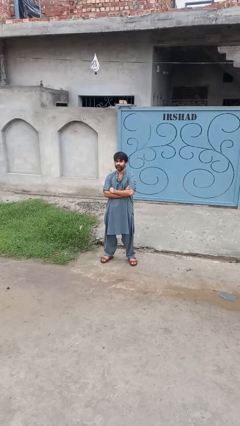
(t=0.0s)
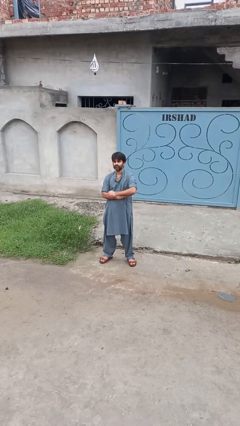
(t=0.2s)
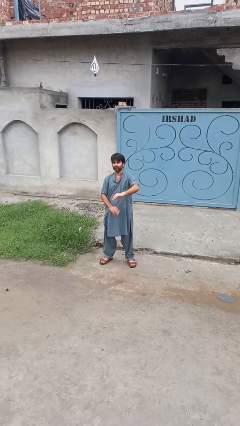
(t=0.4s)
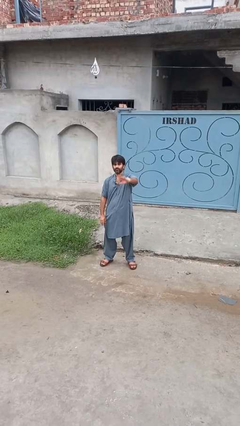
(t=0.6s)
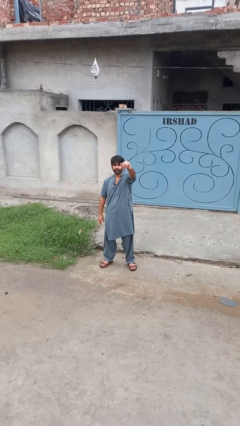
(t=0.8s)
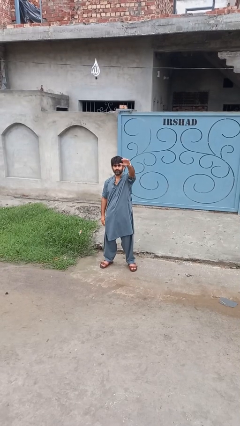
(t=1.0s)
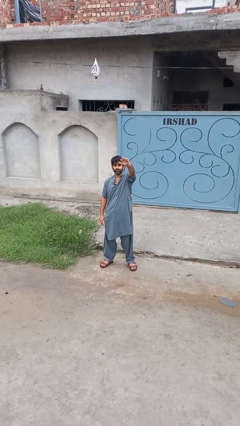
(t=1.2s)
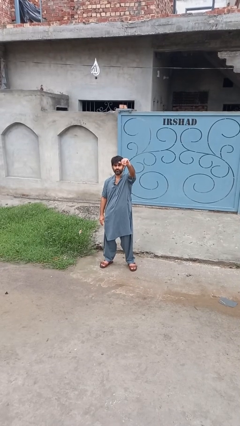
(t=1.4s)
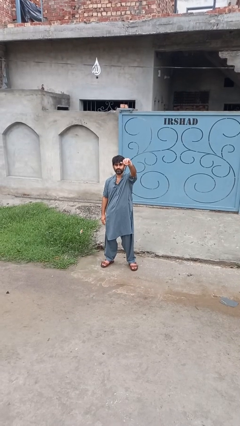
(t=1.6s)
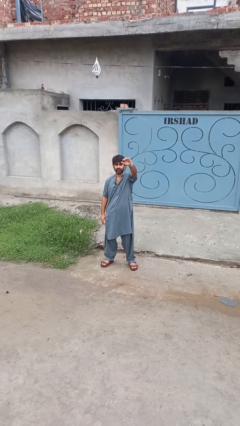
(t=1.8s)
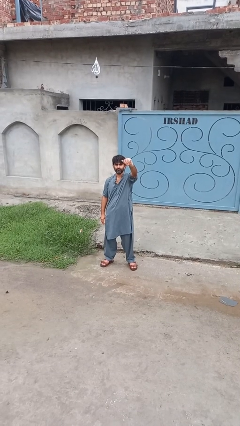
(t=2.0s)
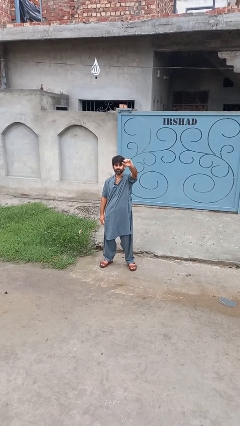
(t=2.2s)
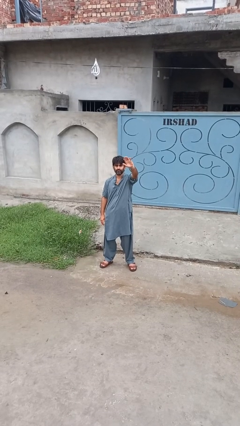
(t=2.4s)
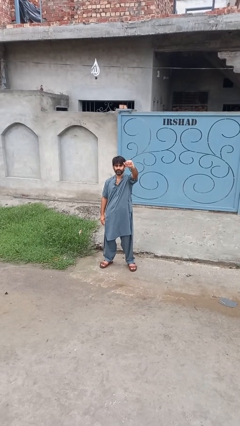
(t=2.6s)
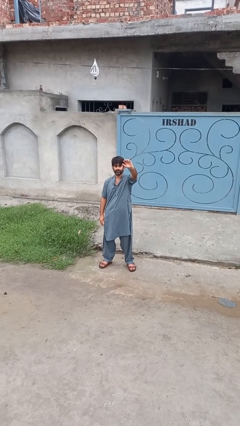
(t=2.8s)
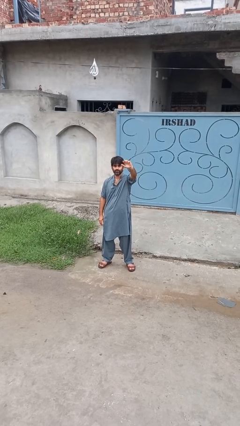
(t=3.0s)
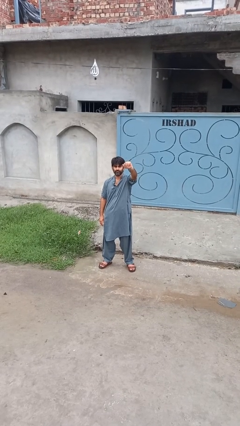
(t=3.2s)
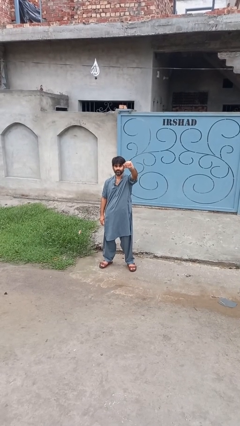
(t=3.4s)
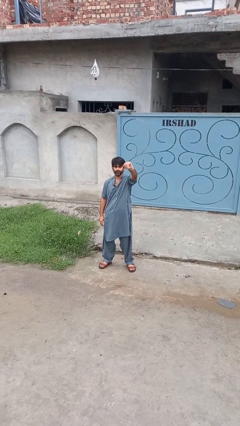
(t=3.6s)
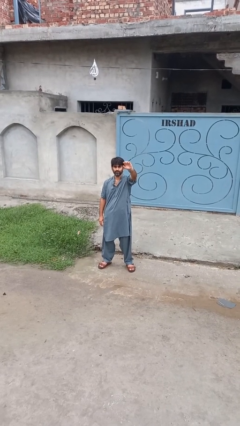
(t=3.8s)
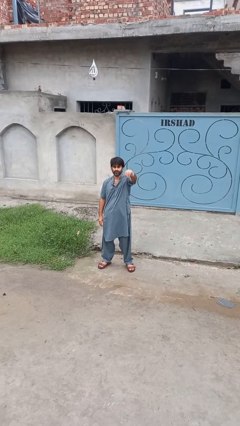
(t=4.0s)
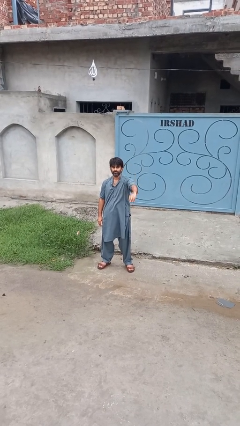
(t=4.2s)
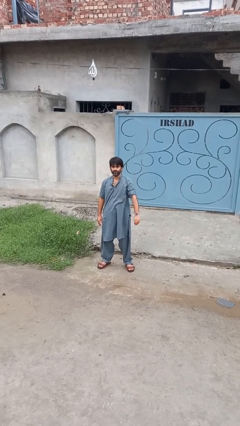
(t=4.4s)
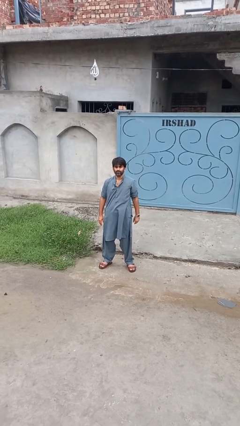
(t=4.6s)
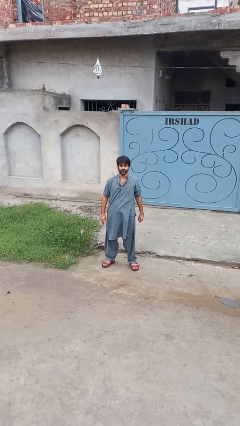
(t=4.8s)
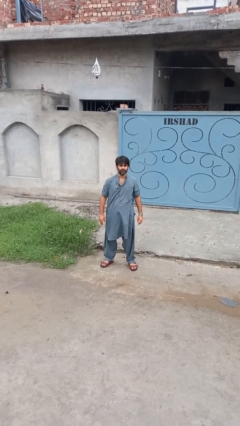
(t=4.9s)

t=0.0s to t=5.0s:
person gestures come here

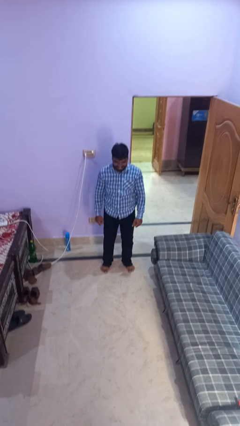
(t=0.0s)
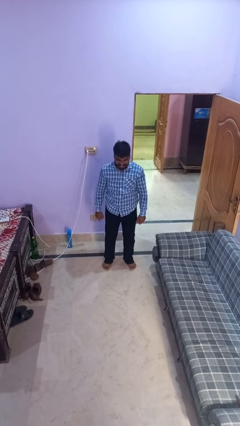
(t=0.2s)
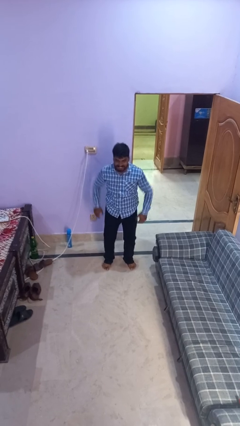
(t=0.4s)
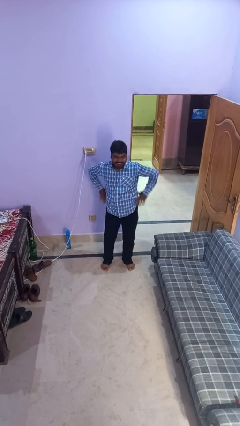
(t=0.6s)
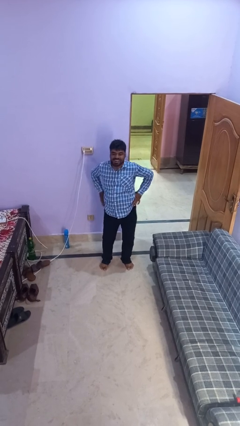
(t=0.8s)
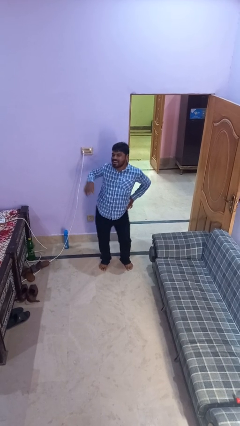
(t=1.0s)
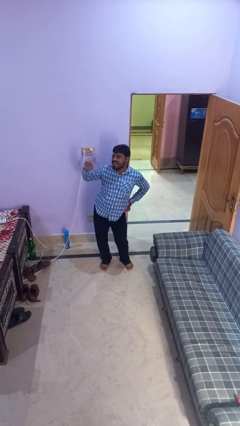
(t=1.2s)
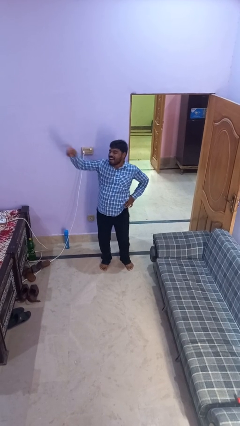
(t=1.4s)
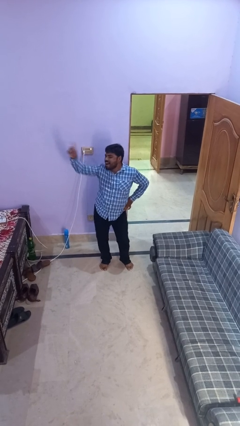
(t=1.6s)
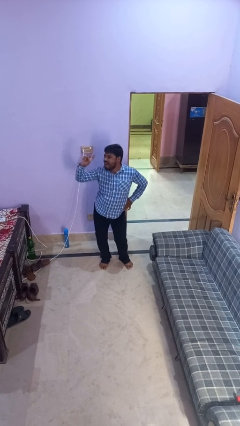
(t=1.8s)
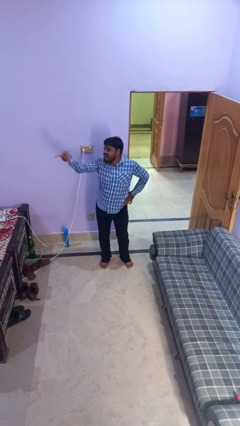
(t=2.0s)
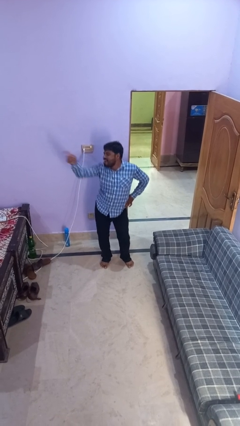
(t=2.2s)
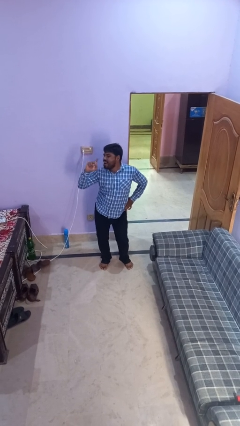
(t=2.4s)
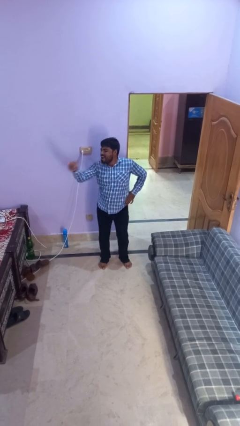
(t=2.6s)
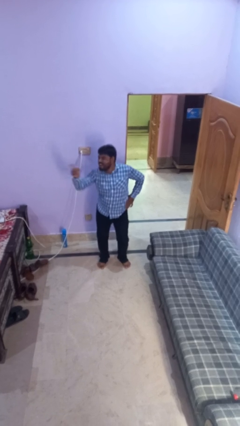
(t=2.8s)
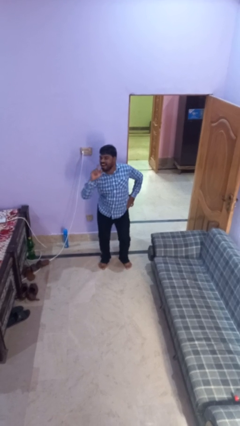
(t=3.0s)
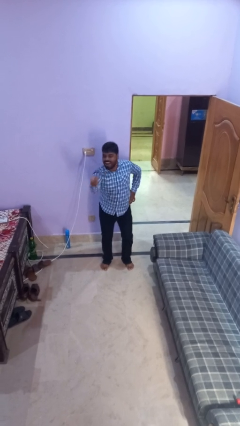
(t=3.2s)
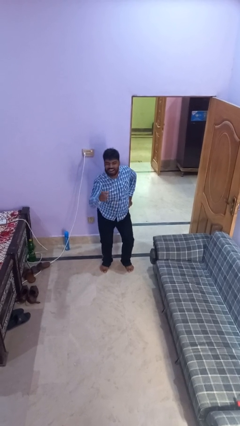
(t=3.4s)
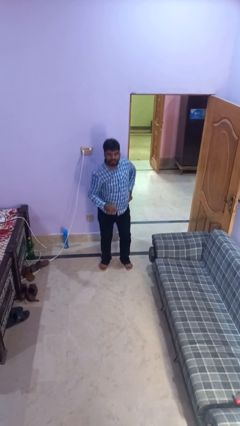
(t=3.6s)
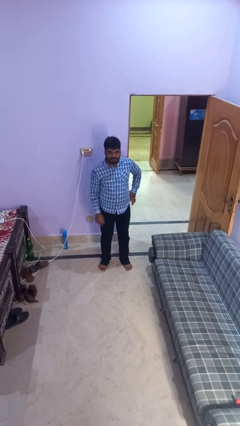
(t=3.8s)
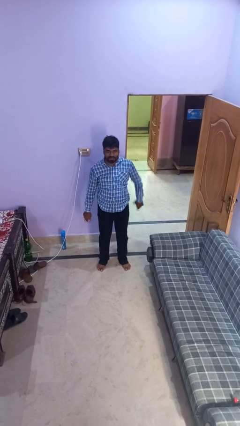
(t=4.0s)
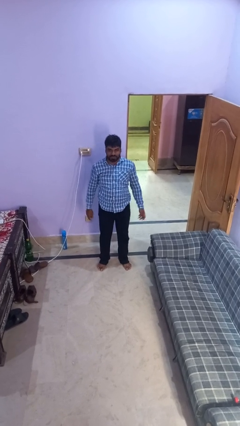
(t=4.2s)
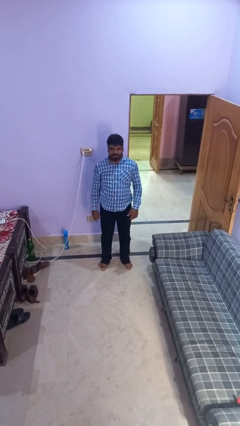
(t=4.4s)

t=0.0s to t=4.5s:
person dances in place

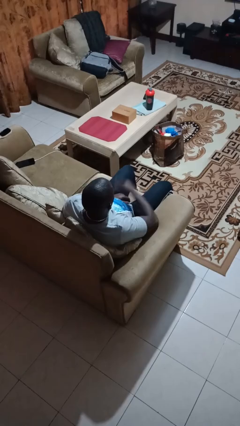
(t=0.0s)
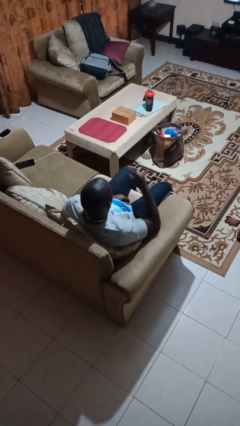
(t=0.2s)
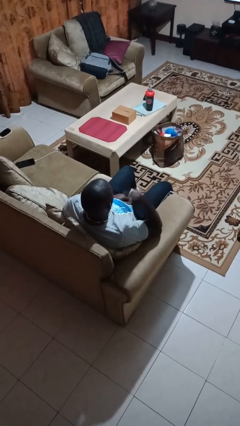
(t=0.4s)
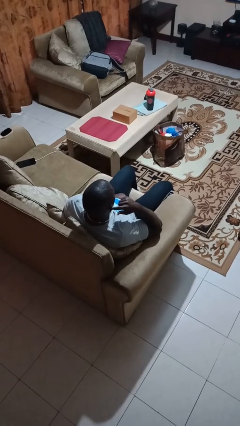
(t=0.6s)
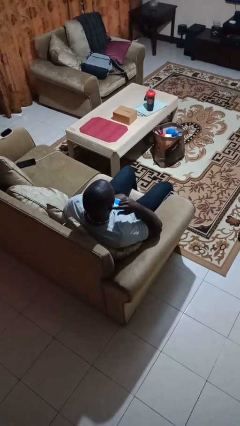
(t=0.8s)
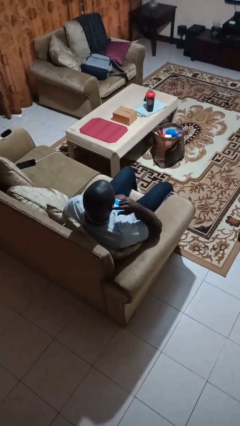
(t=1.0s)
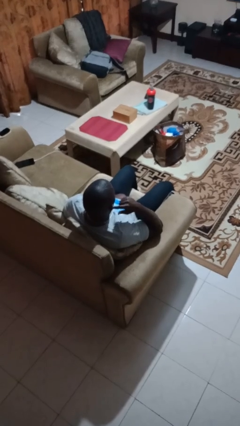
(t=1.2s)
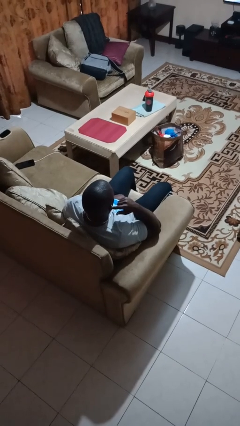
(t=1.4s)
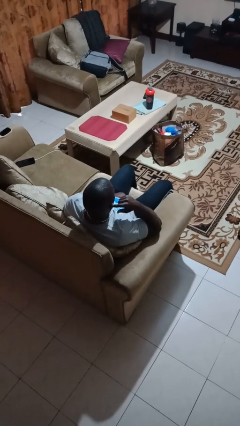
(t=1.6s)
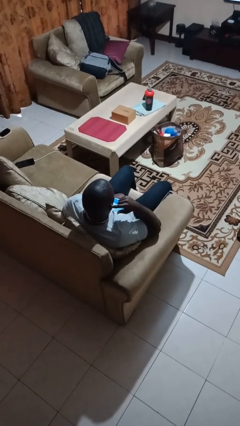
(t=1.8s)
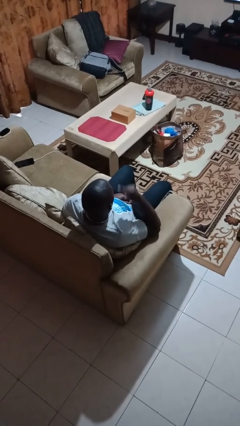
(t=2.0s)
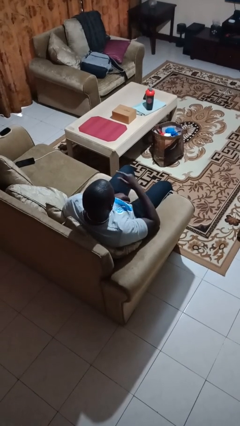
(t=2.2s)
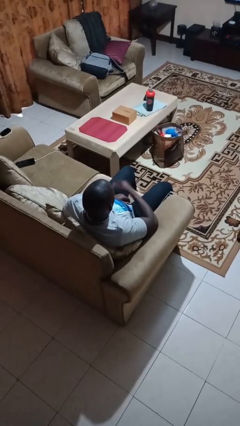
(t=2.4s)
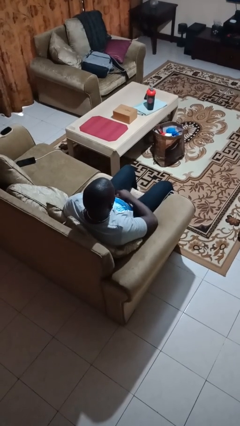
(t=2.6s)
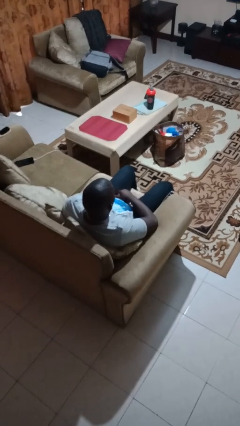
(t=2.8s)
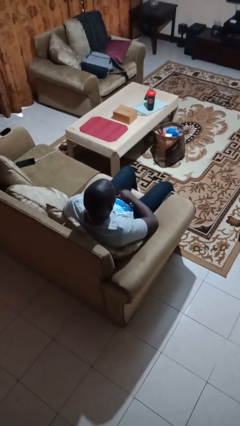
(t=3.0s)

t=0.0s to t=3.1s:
person gestures listen closely

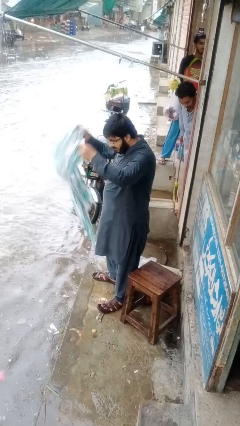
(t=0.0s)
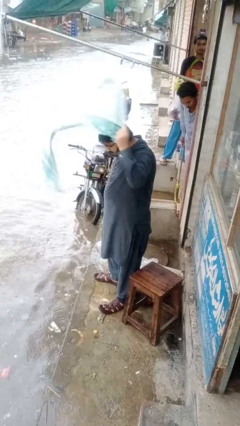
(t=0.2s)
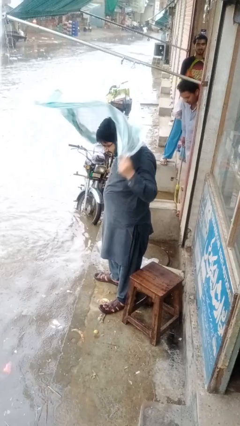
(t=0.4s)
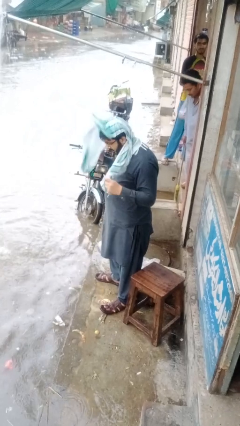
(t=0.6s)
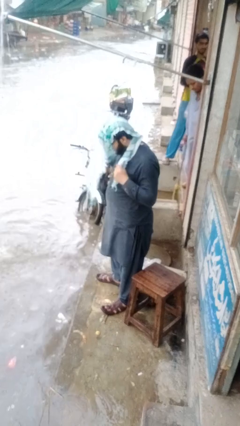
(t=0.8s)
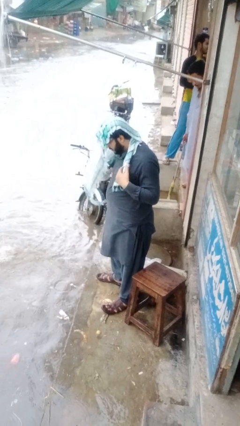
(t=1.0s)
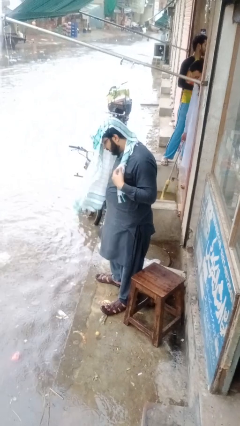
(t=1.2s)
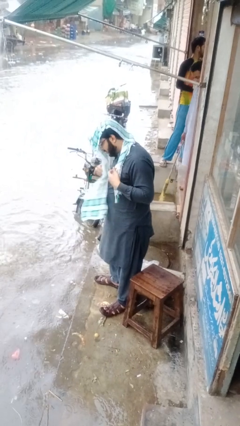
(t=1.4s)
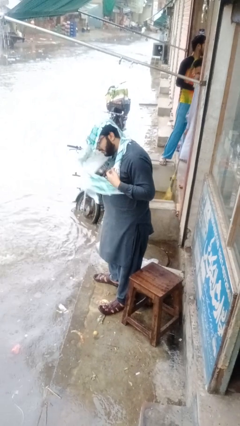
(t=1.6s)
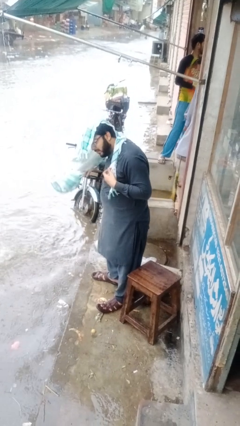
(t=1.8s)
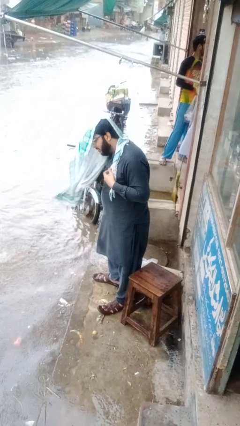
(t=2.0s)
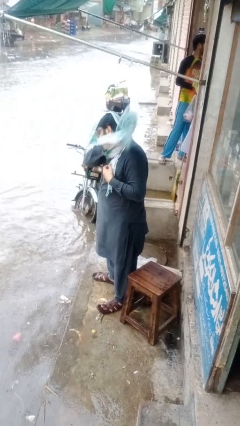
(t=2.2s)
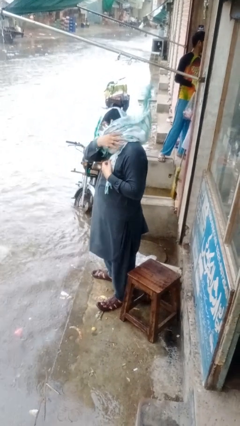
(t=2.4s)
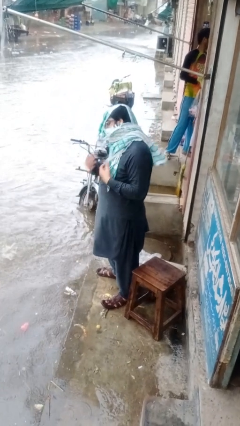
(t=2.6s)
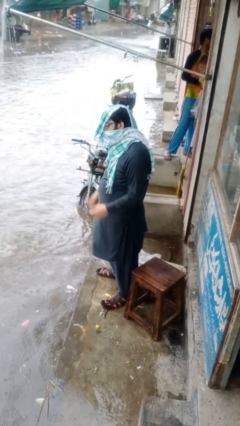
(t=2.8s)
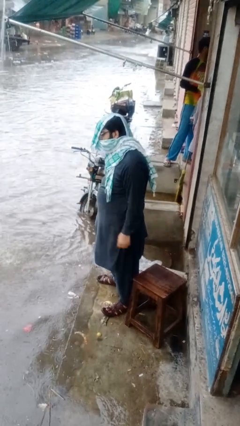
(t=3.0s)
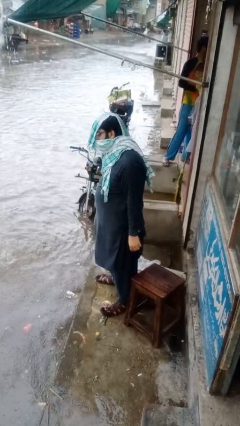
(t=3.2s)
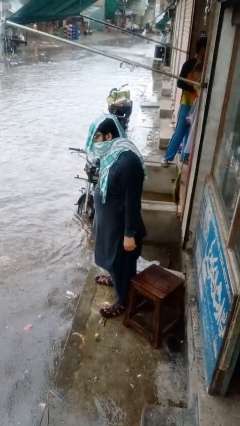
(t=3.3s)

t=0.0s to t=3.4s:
person puts on scarf

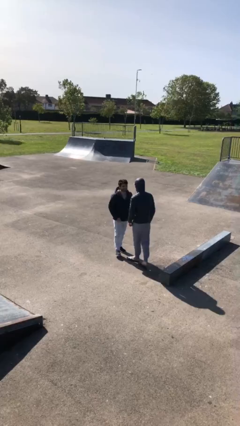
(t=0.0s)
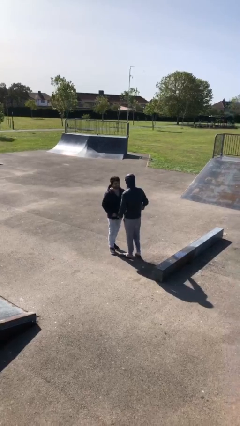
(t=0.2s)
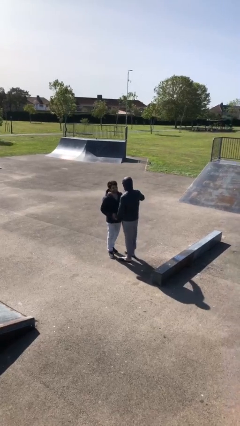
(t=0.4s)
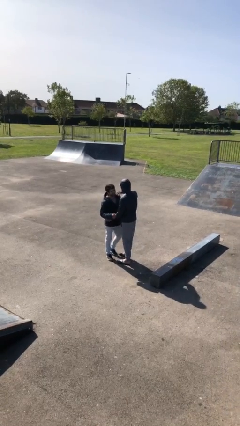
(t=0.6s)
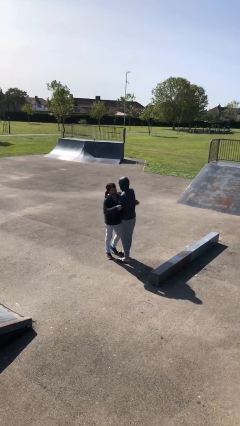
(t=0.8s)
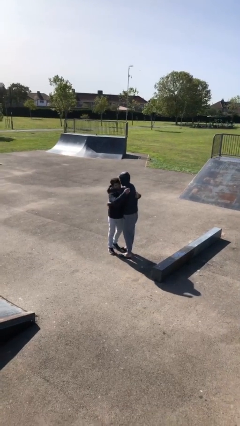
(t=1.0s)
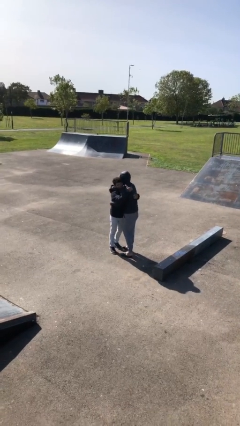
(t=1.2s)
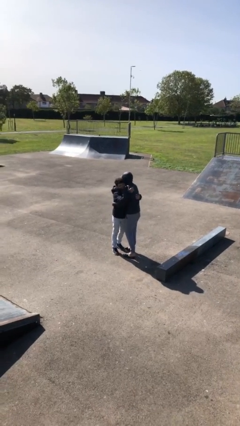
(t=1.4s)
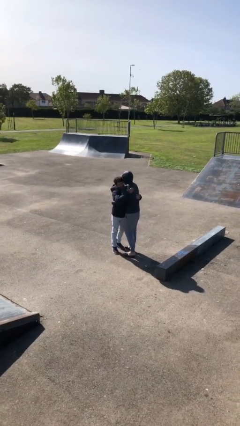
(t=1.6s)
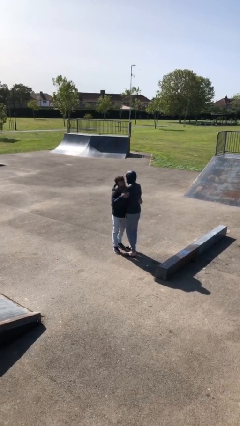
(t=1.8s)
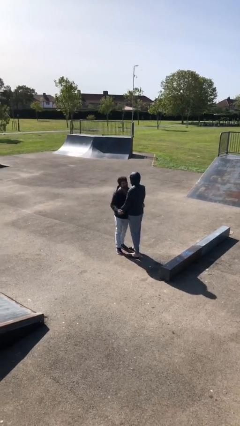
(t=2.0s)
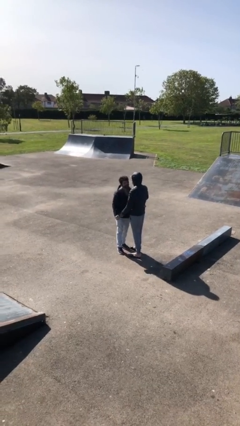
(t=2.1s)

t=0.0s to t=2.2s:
person embraces person
